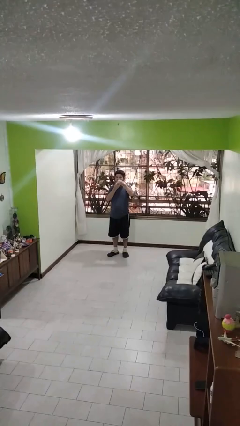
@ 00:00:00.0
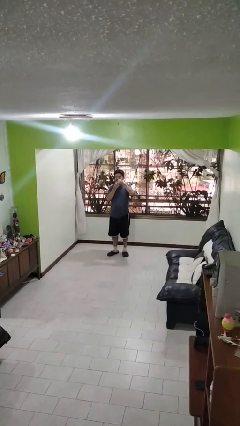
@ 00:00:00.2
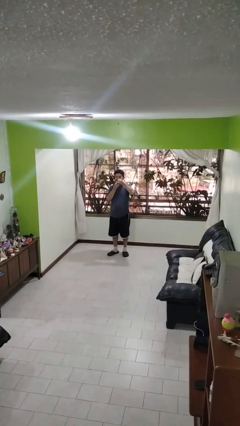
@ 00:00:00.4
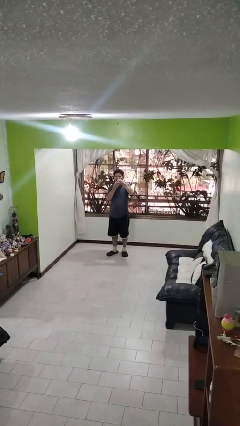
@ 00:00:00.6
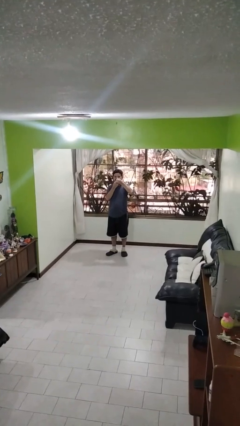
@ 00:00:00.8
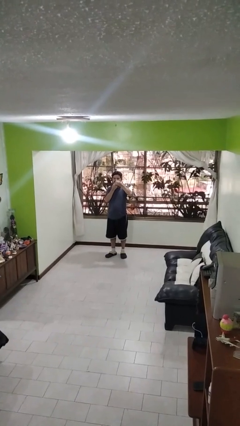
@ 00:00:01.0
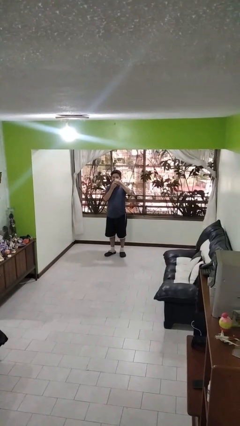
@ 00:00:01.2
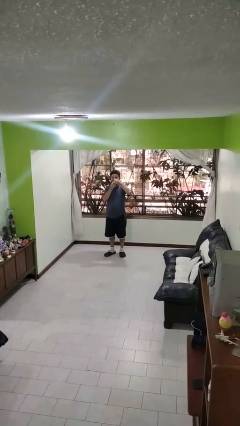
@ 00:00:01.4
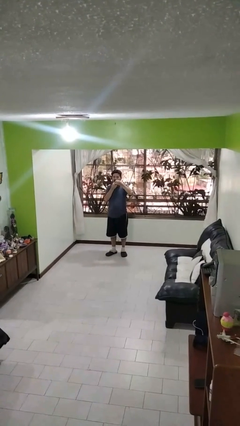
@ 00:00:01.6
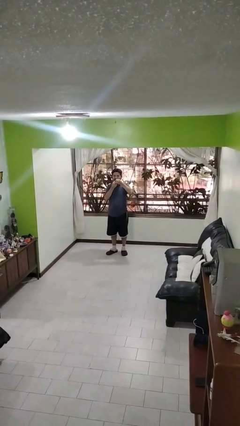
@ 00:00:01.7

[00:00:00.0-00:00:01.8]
person flosses

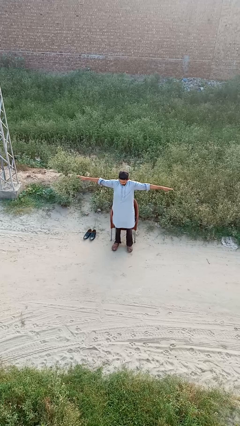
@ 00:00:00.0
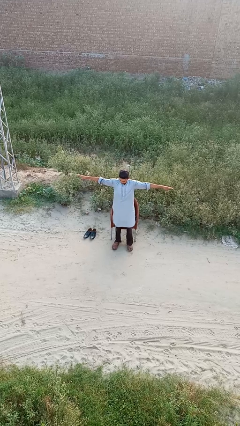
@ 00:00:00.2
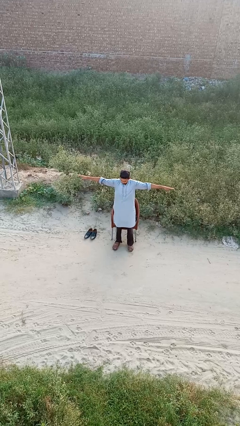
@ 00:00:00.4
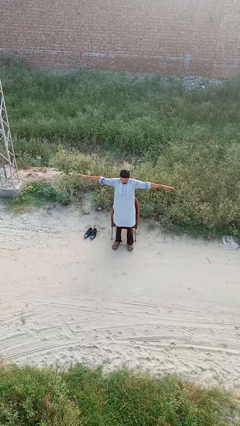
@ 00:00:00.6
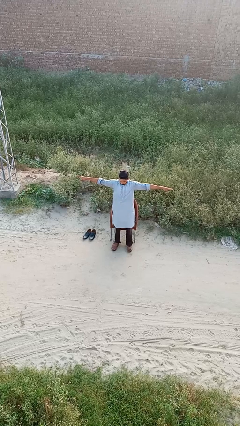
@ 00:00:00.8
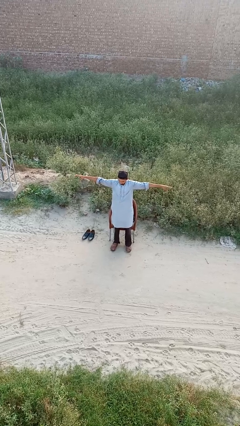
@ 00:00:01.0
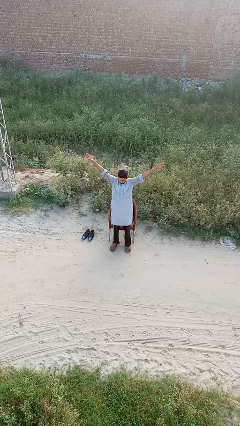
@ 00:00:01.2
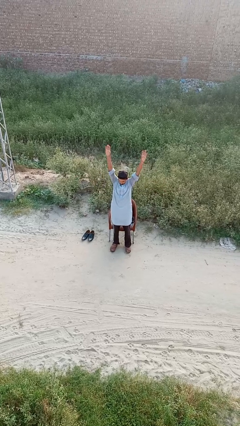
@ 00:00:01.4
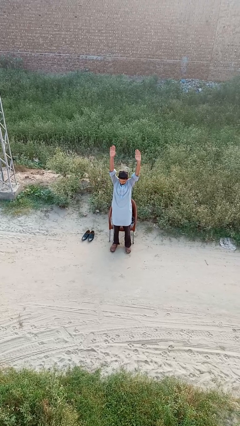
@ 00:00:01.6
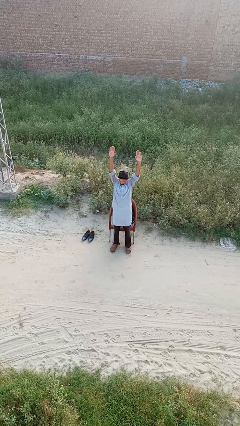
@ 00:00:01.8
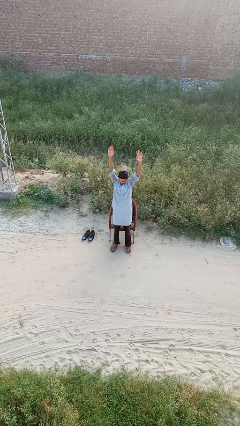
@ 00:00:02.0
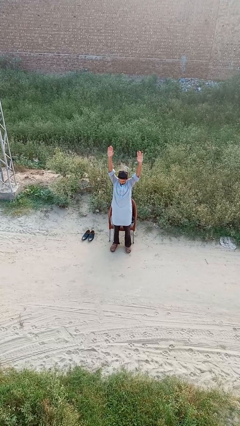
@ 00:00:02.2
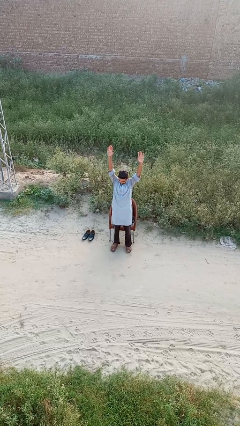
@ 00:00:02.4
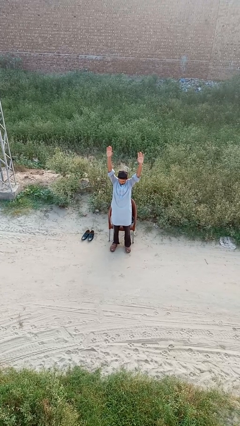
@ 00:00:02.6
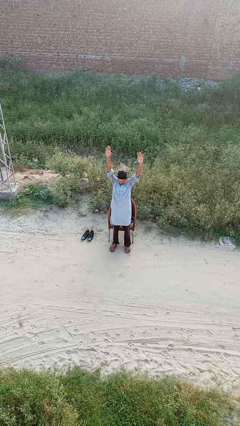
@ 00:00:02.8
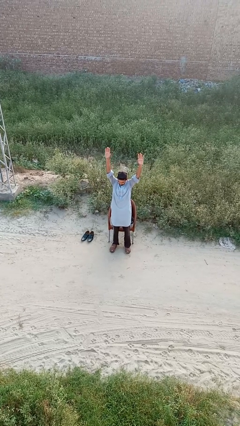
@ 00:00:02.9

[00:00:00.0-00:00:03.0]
person stretches arms over head

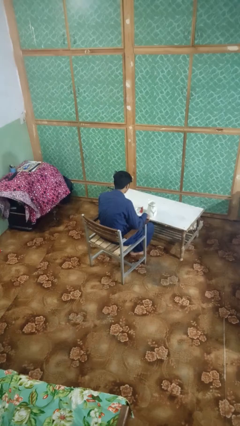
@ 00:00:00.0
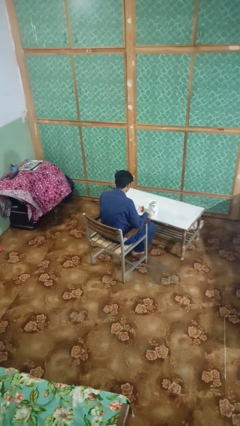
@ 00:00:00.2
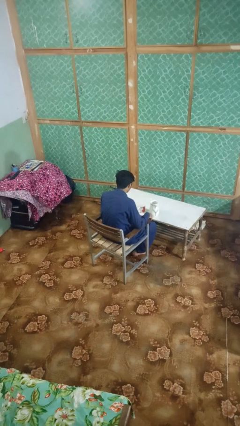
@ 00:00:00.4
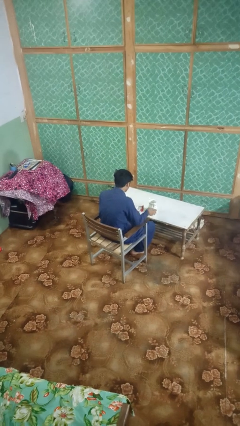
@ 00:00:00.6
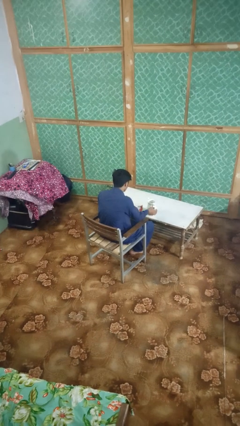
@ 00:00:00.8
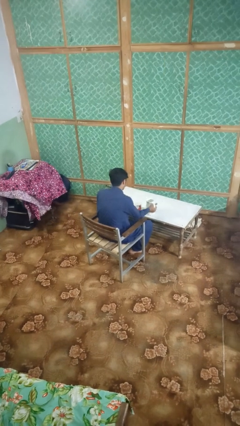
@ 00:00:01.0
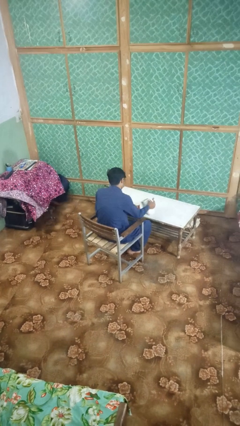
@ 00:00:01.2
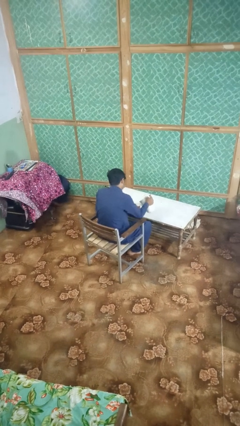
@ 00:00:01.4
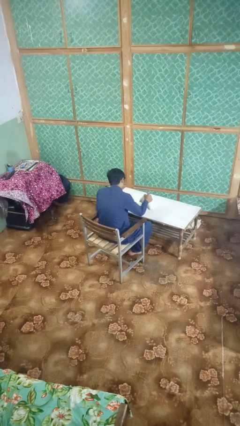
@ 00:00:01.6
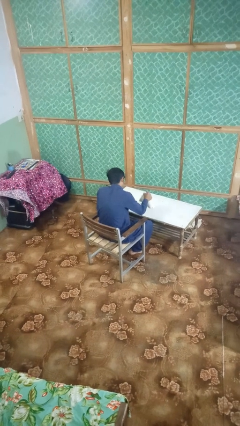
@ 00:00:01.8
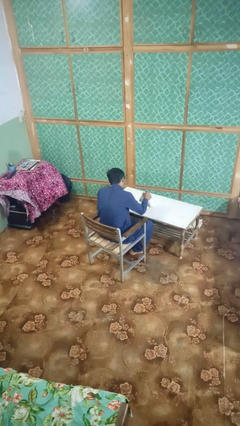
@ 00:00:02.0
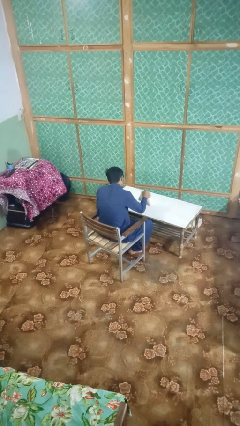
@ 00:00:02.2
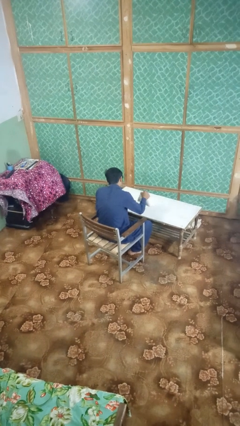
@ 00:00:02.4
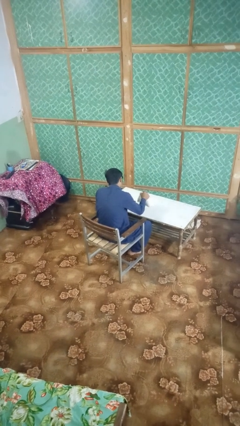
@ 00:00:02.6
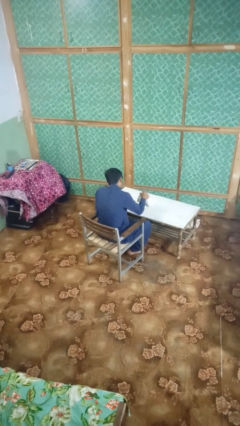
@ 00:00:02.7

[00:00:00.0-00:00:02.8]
person pours coffee into mug

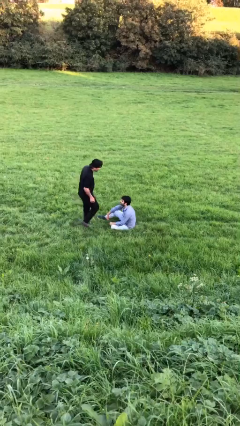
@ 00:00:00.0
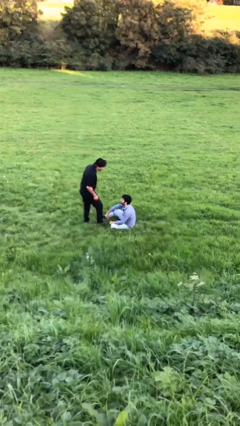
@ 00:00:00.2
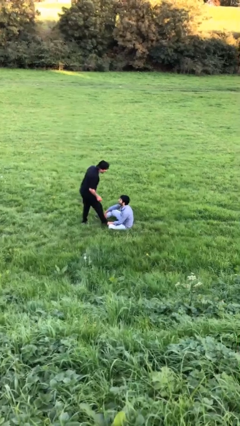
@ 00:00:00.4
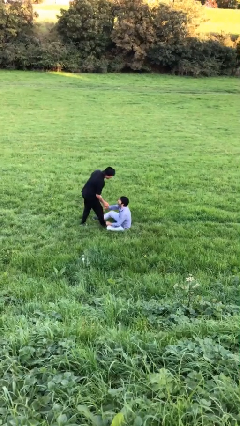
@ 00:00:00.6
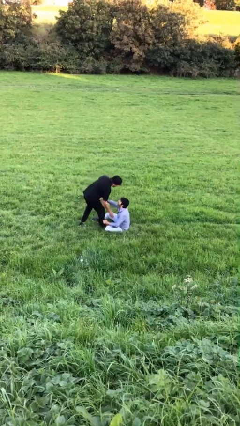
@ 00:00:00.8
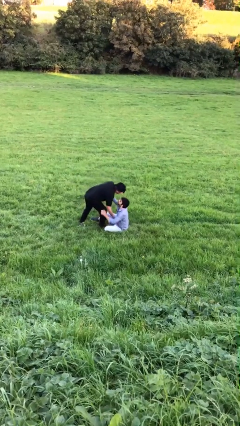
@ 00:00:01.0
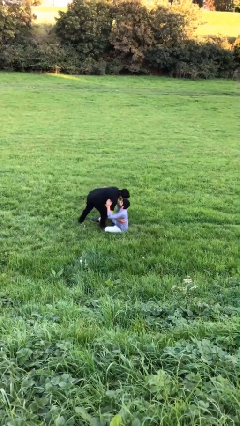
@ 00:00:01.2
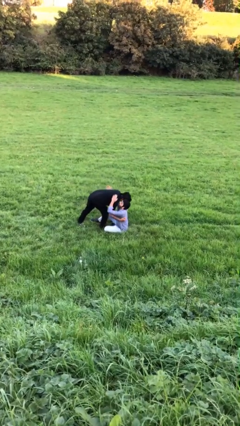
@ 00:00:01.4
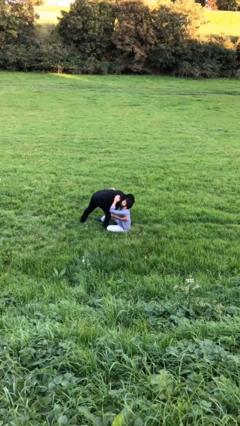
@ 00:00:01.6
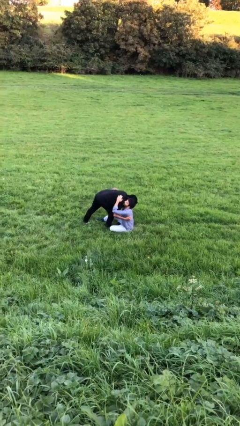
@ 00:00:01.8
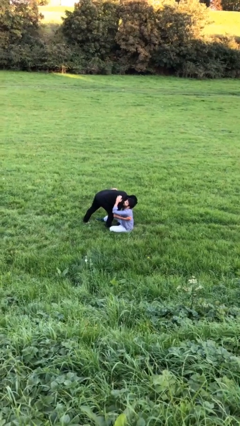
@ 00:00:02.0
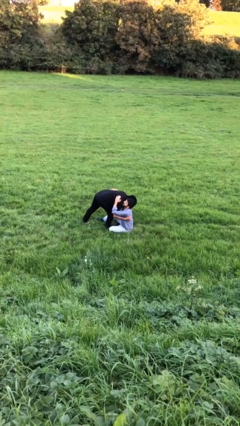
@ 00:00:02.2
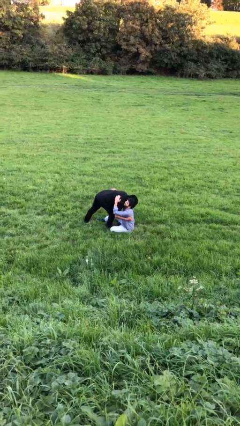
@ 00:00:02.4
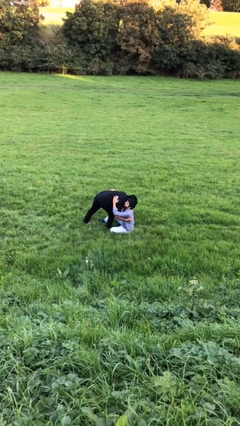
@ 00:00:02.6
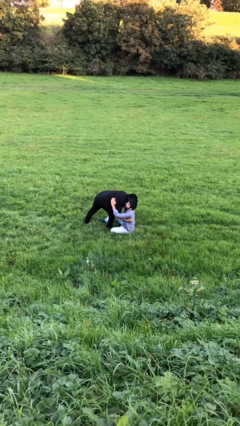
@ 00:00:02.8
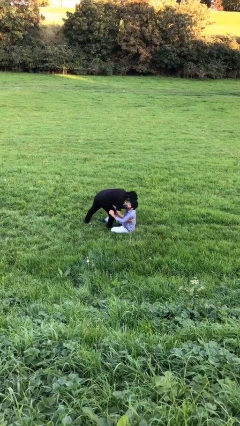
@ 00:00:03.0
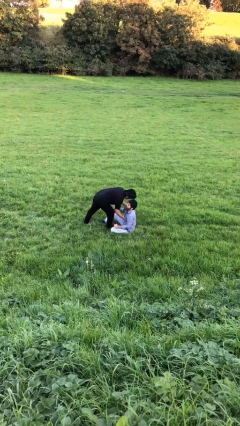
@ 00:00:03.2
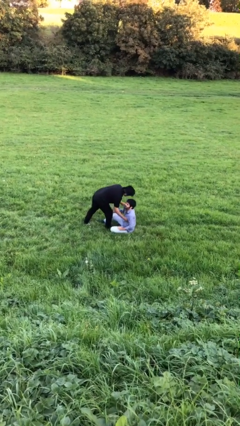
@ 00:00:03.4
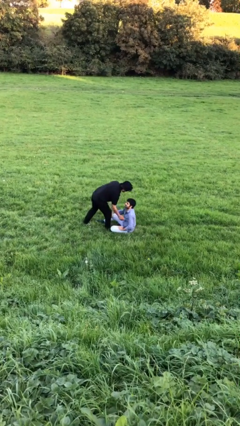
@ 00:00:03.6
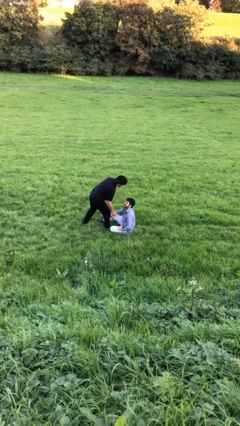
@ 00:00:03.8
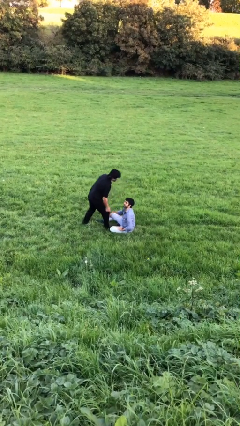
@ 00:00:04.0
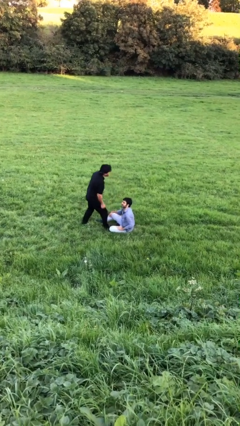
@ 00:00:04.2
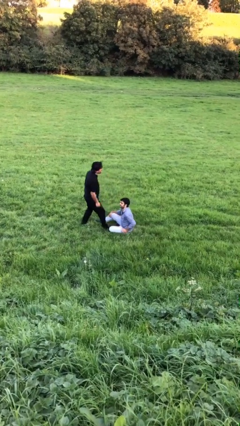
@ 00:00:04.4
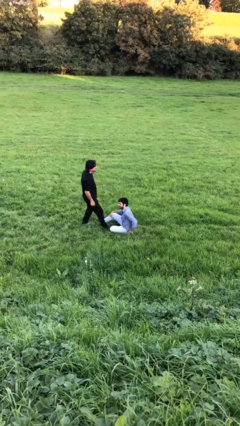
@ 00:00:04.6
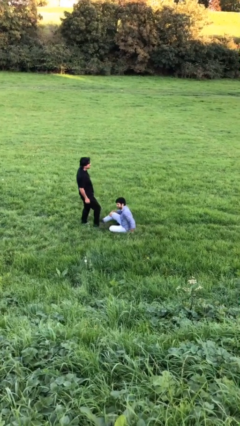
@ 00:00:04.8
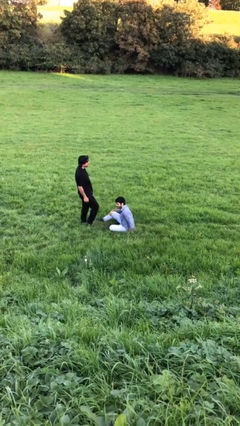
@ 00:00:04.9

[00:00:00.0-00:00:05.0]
person embraces person

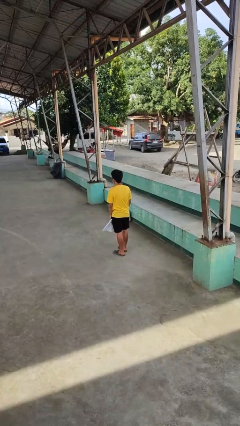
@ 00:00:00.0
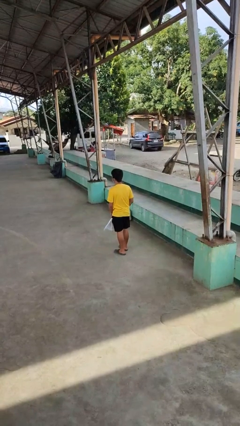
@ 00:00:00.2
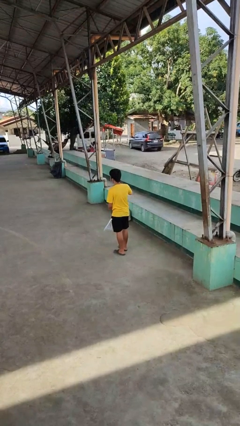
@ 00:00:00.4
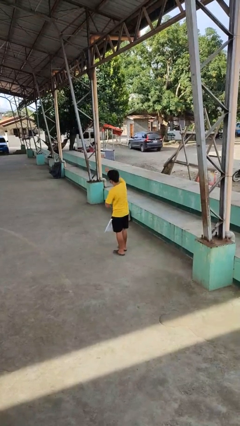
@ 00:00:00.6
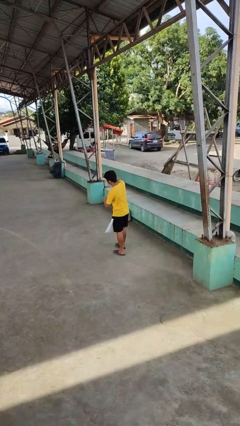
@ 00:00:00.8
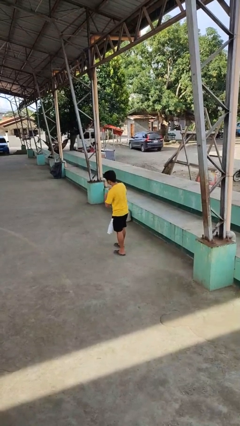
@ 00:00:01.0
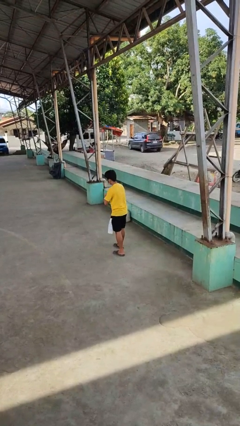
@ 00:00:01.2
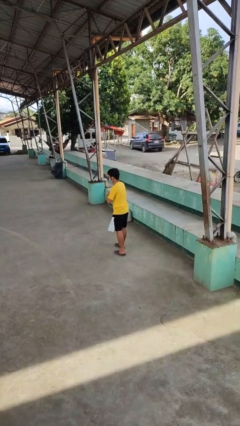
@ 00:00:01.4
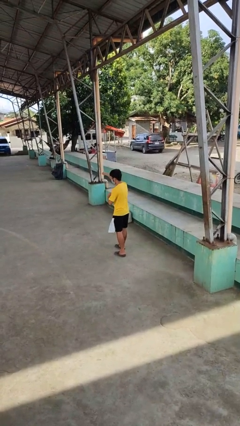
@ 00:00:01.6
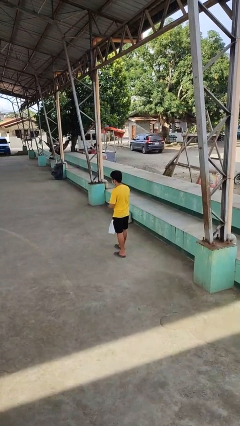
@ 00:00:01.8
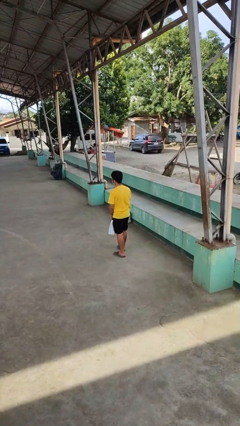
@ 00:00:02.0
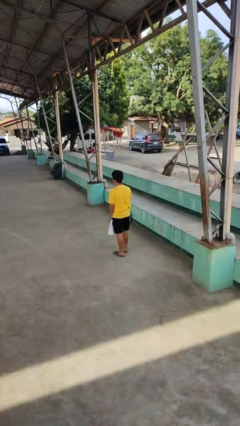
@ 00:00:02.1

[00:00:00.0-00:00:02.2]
person punches

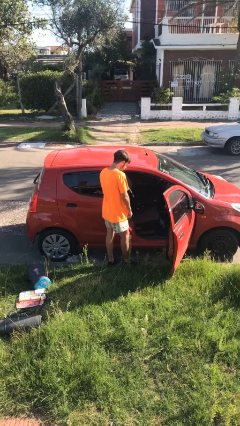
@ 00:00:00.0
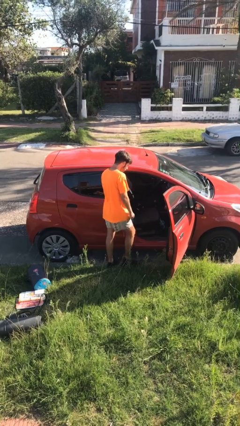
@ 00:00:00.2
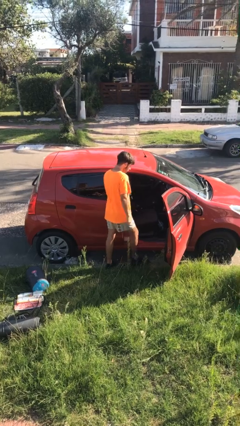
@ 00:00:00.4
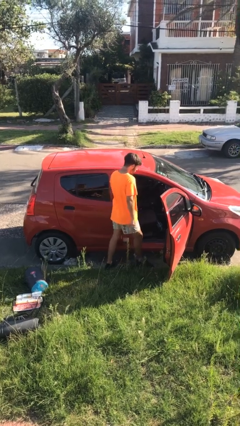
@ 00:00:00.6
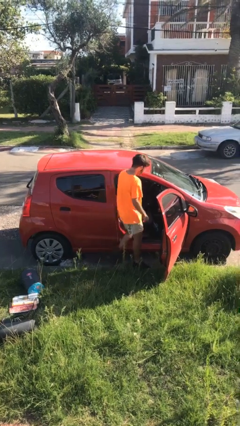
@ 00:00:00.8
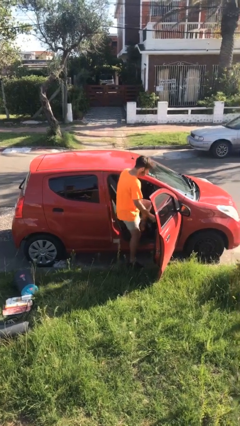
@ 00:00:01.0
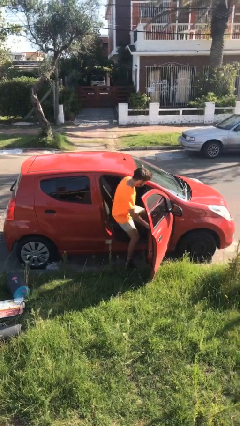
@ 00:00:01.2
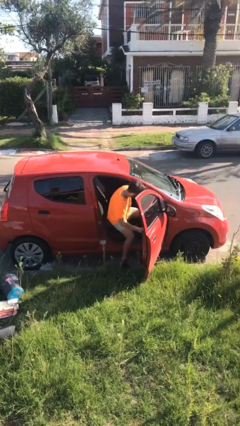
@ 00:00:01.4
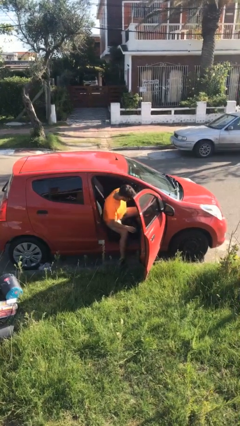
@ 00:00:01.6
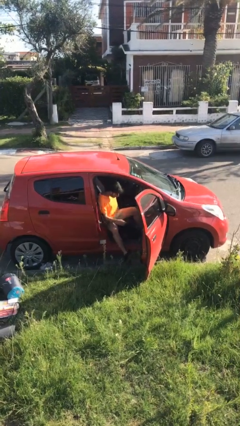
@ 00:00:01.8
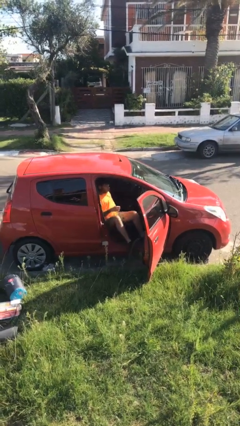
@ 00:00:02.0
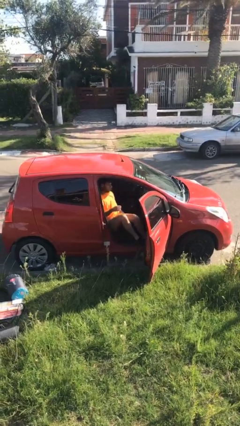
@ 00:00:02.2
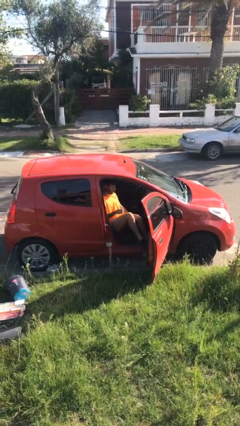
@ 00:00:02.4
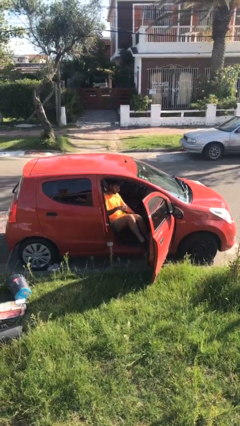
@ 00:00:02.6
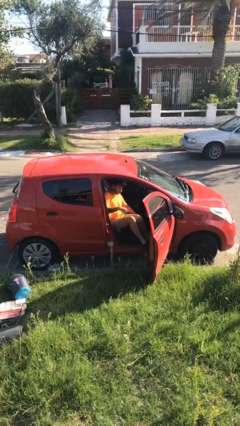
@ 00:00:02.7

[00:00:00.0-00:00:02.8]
person enters car
